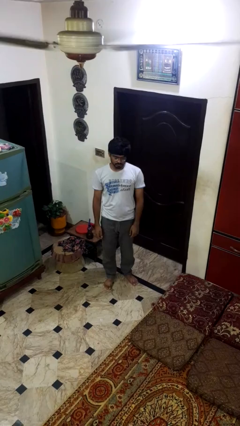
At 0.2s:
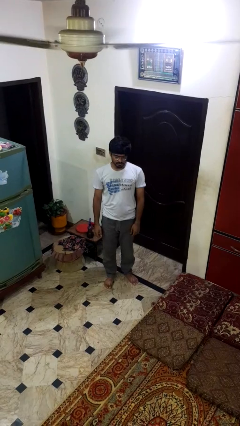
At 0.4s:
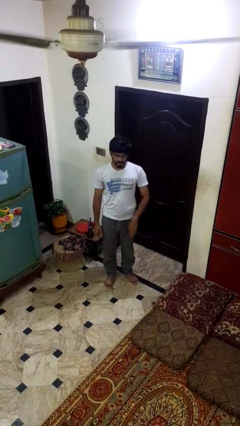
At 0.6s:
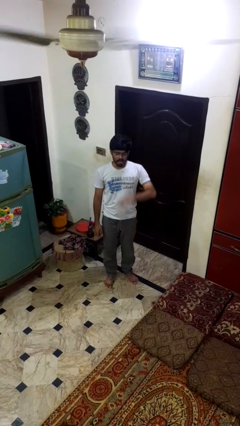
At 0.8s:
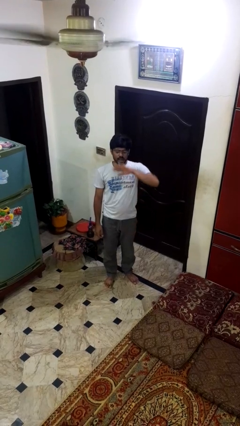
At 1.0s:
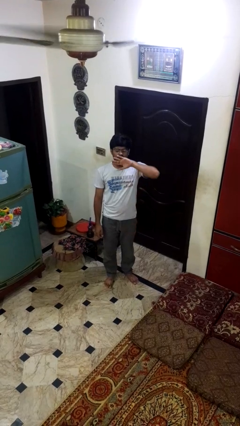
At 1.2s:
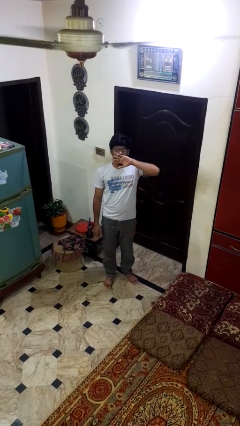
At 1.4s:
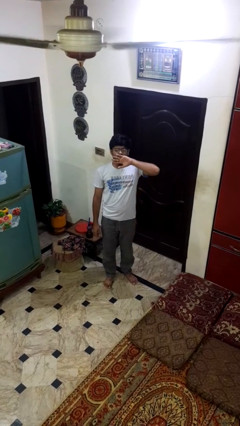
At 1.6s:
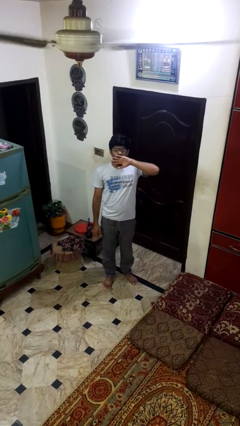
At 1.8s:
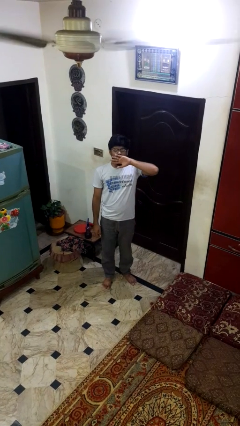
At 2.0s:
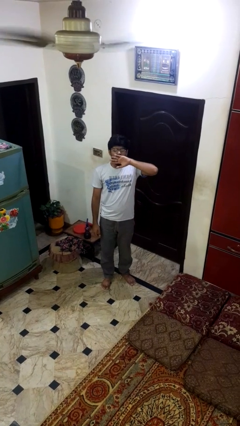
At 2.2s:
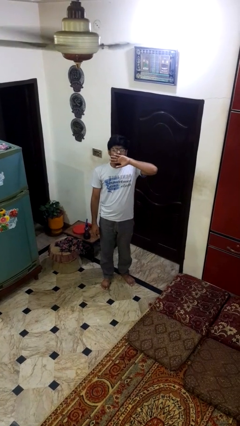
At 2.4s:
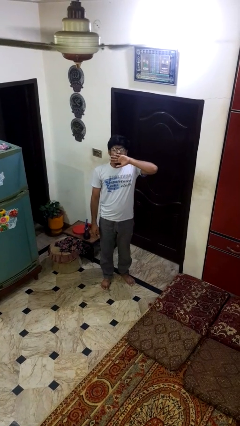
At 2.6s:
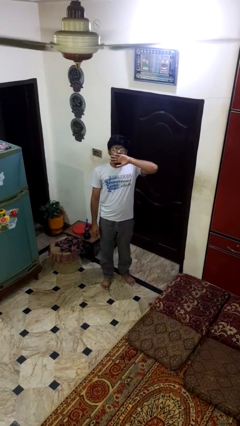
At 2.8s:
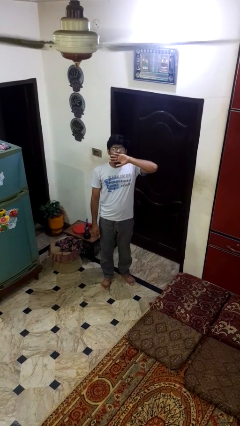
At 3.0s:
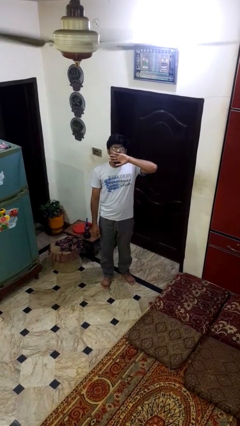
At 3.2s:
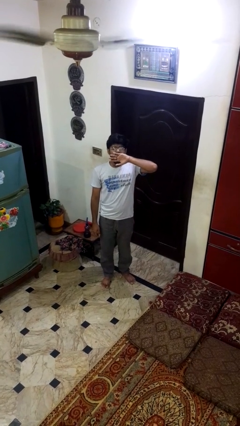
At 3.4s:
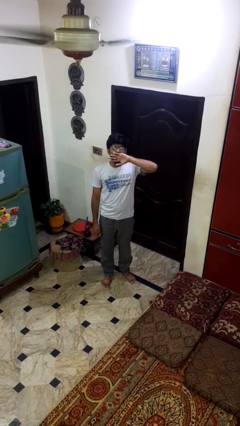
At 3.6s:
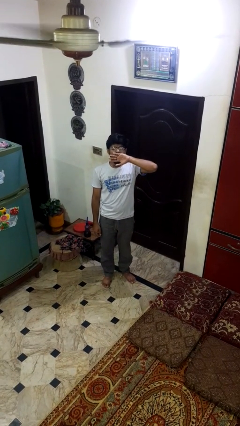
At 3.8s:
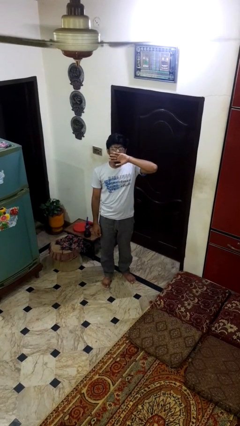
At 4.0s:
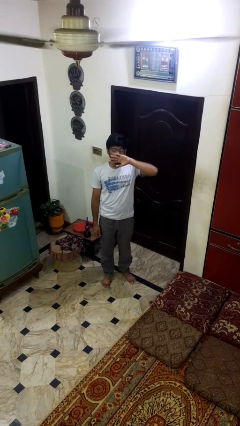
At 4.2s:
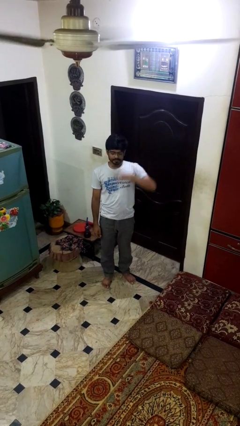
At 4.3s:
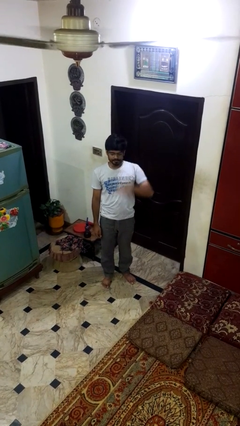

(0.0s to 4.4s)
person yawns

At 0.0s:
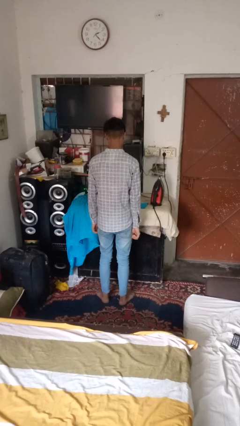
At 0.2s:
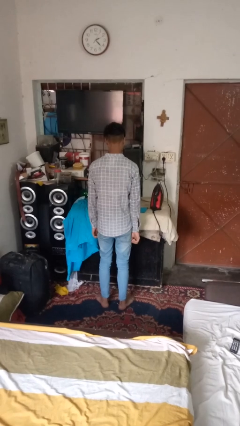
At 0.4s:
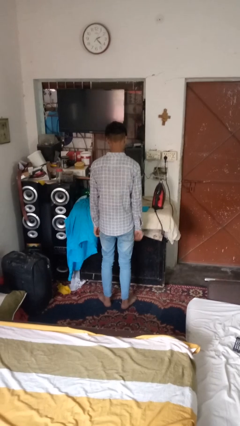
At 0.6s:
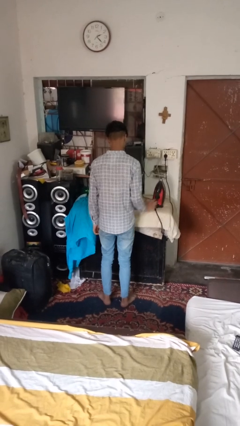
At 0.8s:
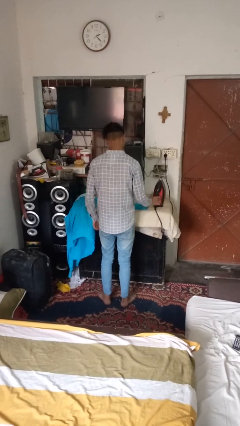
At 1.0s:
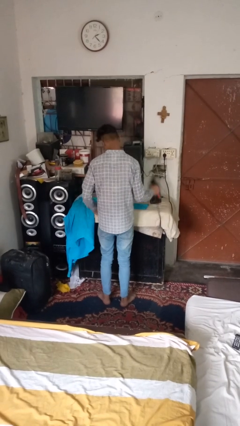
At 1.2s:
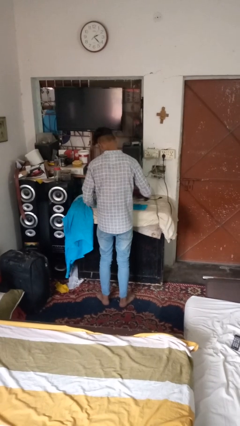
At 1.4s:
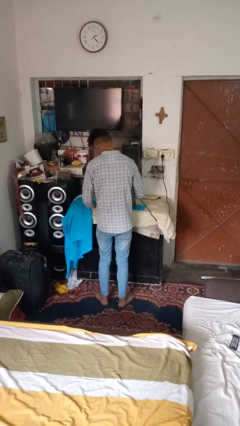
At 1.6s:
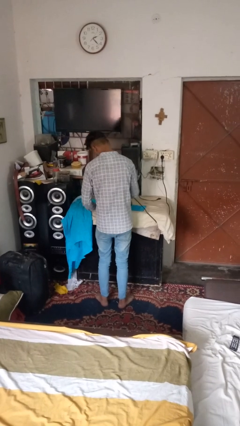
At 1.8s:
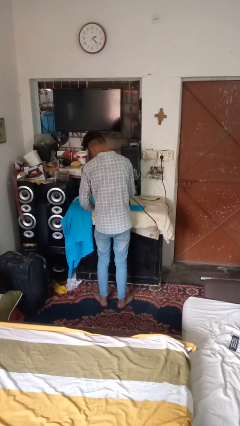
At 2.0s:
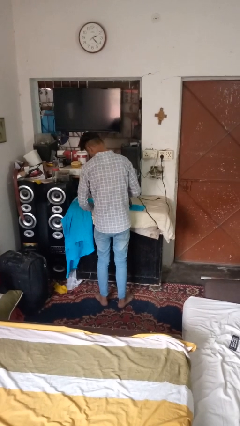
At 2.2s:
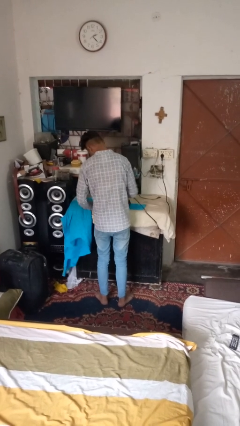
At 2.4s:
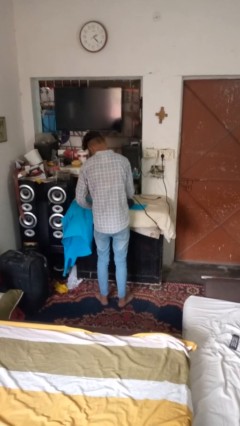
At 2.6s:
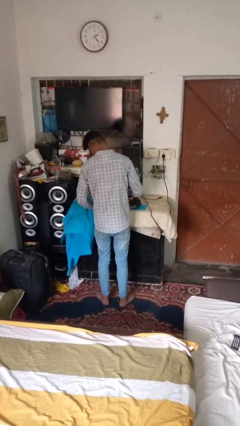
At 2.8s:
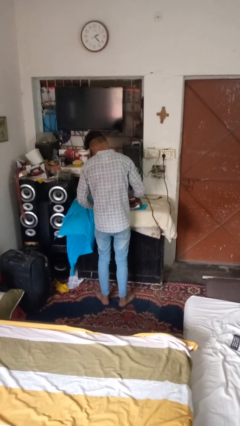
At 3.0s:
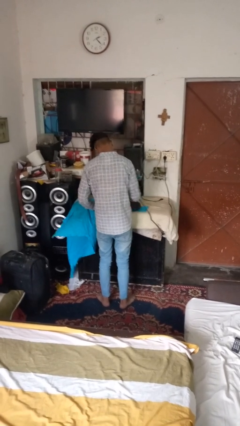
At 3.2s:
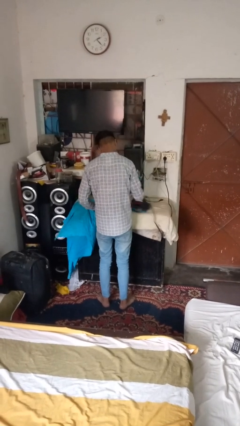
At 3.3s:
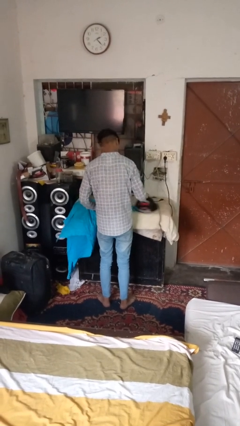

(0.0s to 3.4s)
person irons clothes

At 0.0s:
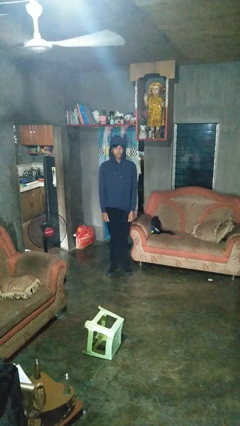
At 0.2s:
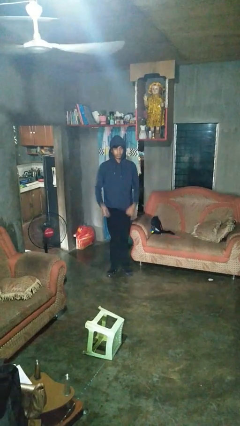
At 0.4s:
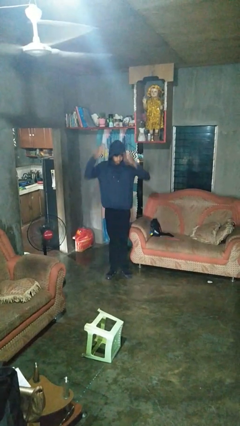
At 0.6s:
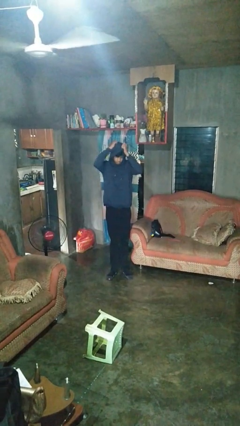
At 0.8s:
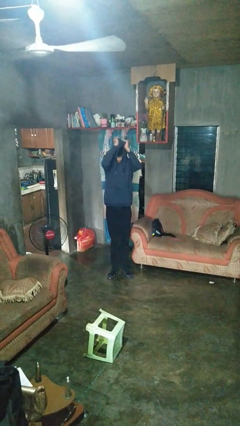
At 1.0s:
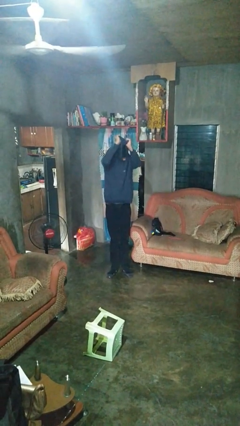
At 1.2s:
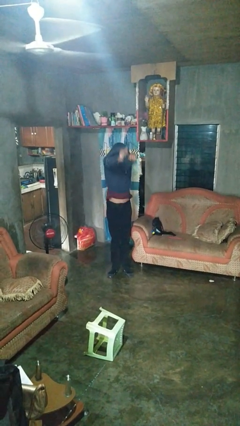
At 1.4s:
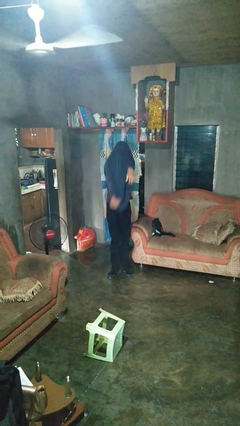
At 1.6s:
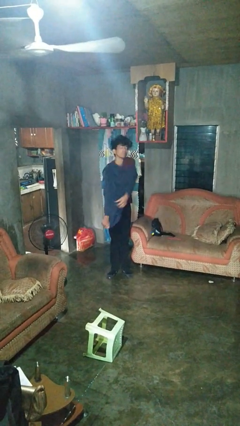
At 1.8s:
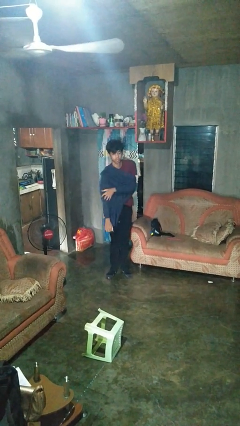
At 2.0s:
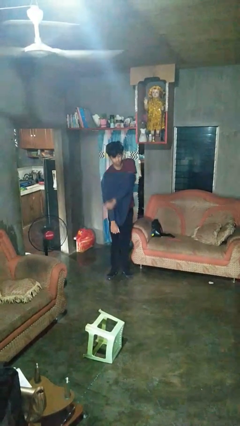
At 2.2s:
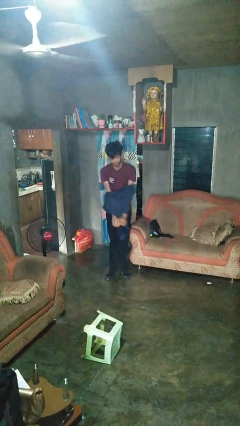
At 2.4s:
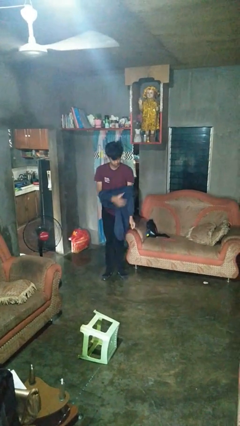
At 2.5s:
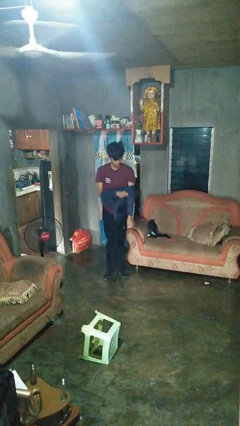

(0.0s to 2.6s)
person takes off hoodie

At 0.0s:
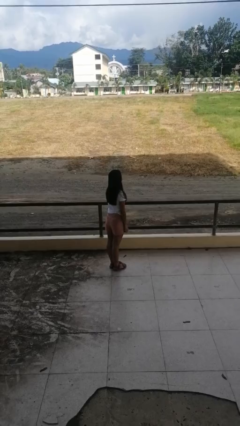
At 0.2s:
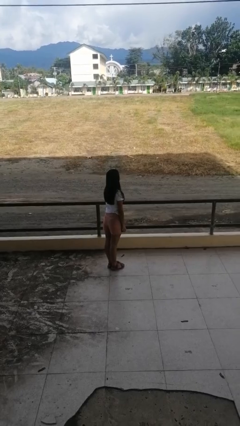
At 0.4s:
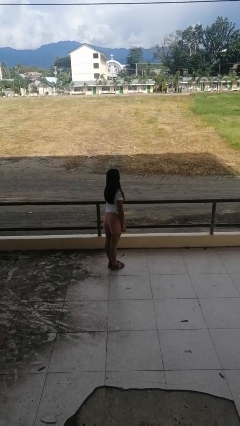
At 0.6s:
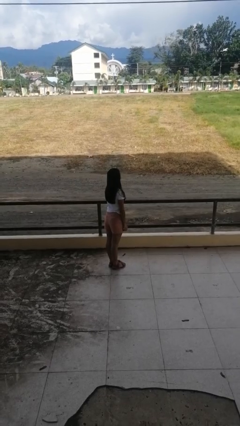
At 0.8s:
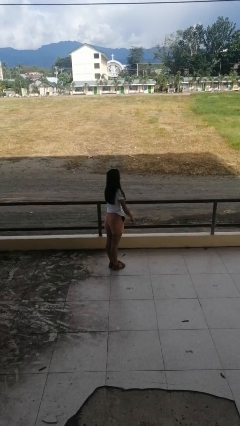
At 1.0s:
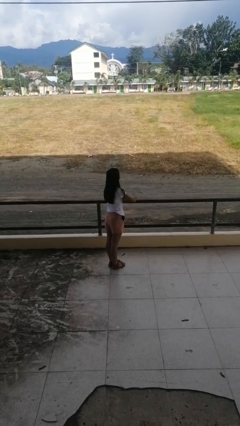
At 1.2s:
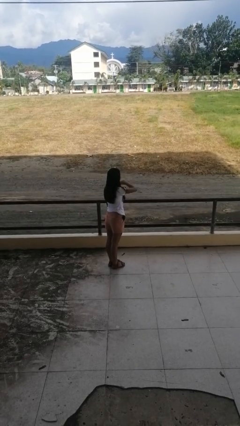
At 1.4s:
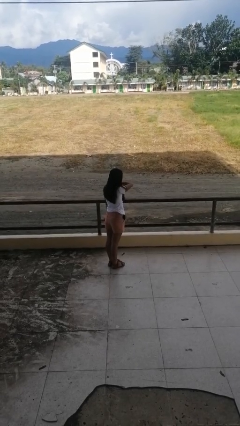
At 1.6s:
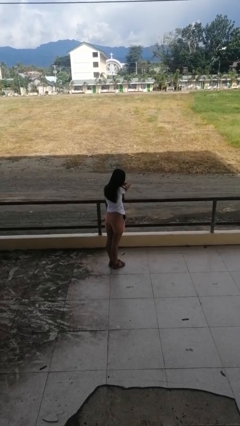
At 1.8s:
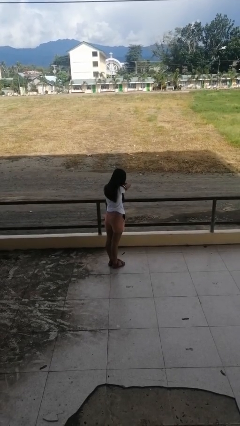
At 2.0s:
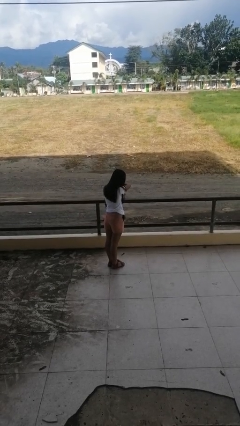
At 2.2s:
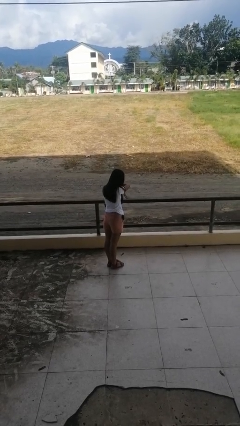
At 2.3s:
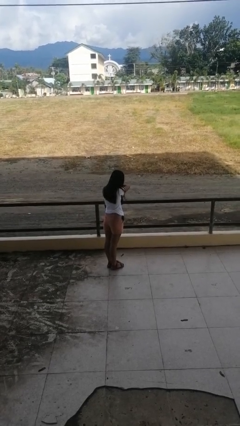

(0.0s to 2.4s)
person sneezes into arm

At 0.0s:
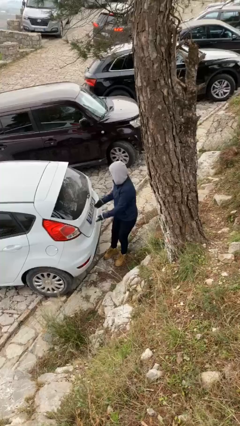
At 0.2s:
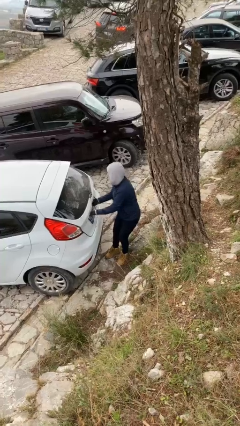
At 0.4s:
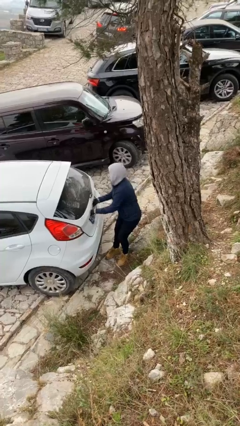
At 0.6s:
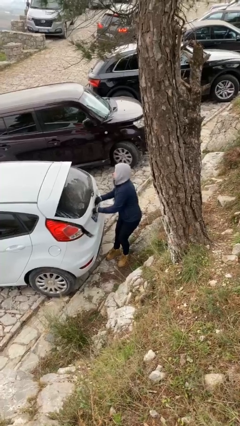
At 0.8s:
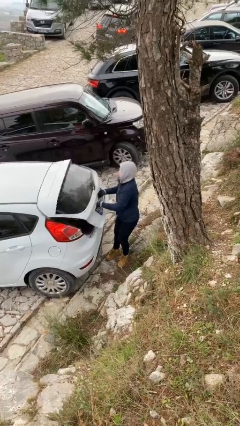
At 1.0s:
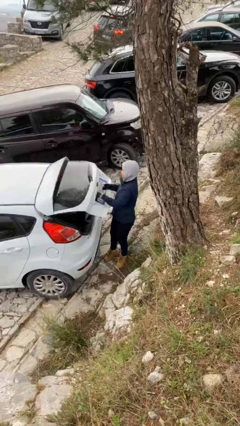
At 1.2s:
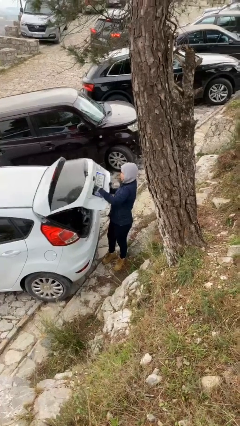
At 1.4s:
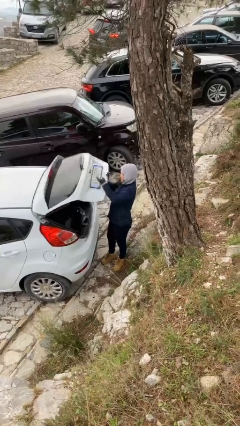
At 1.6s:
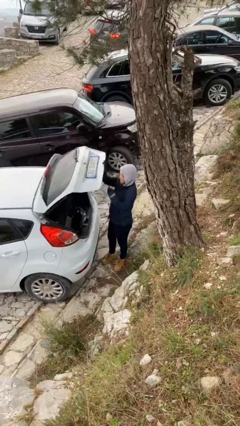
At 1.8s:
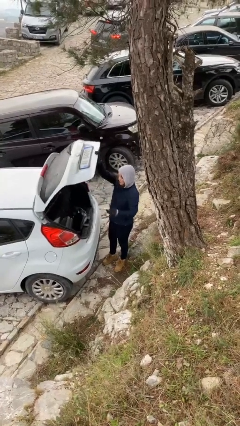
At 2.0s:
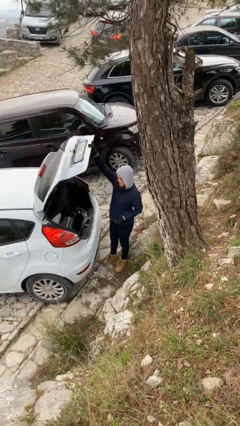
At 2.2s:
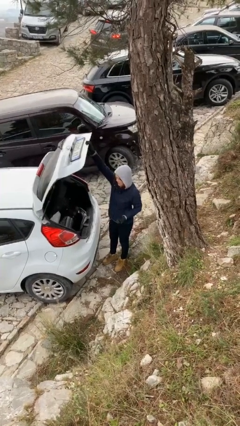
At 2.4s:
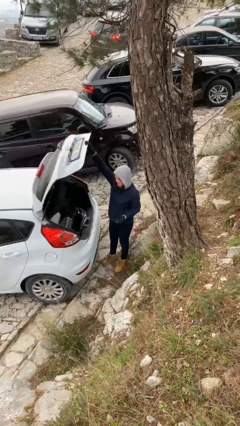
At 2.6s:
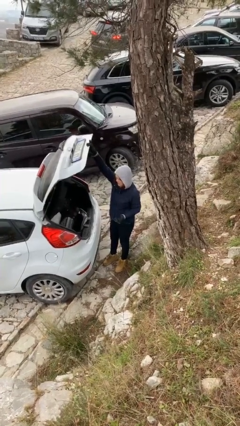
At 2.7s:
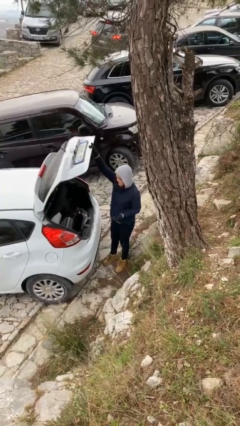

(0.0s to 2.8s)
person opens car trunk

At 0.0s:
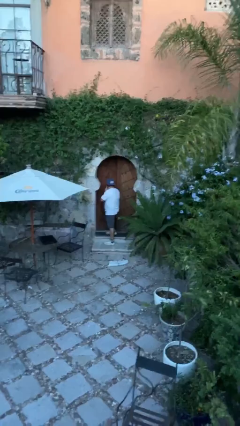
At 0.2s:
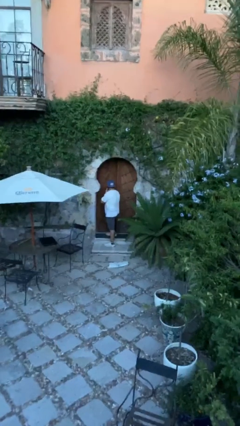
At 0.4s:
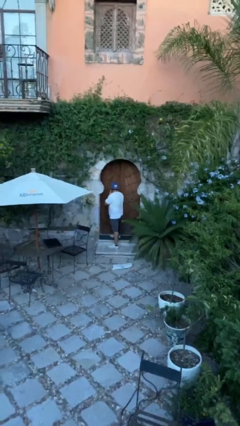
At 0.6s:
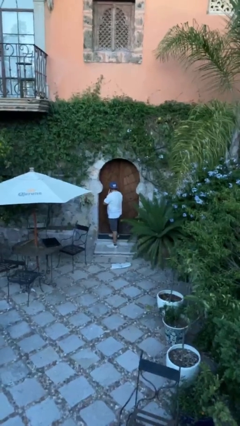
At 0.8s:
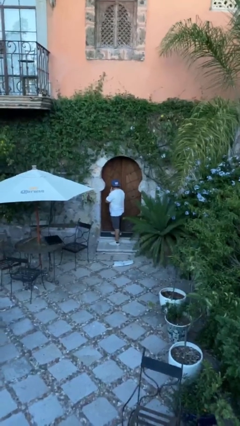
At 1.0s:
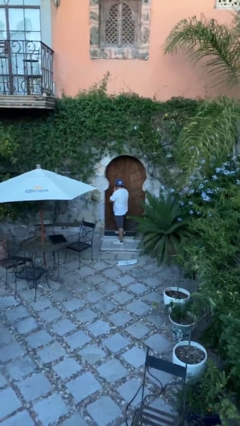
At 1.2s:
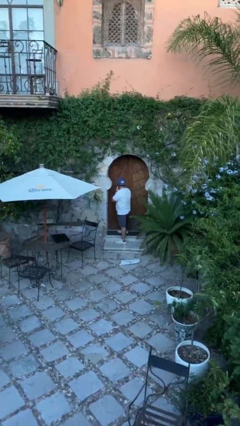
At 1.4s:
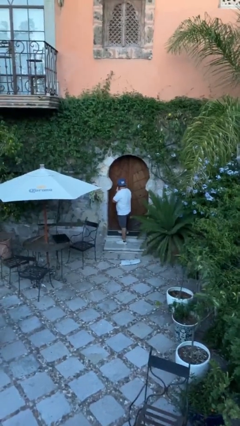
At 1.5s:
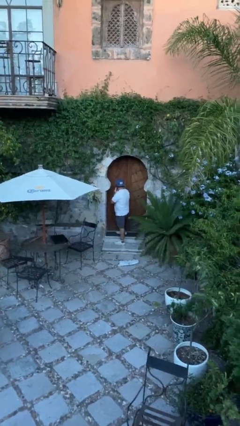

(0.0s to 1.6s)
person closes facility door

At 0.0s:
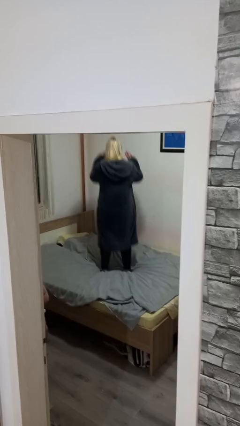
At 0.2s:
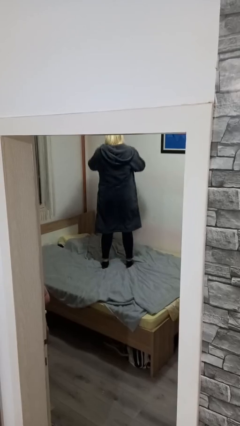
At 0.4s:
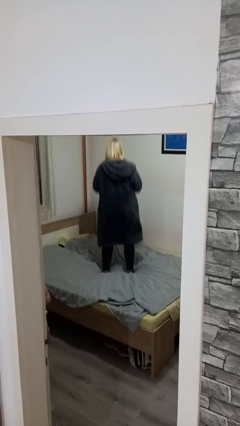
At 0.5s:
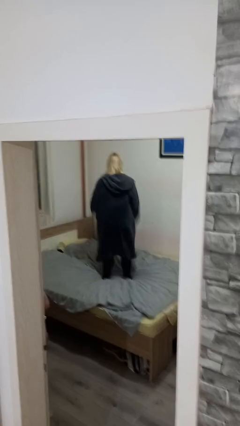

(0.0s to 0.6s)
person jumps on bed
